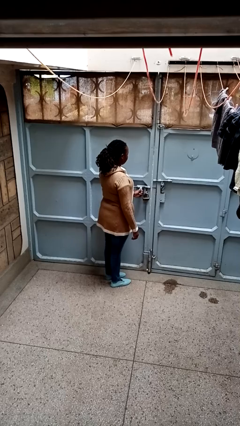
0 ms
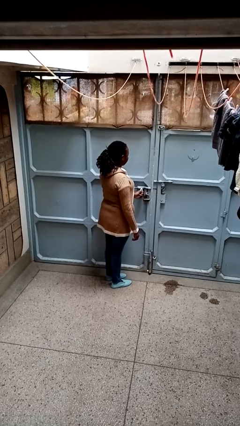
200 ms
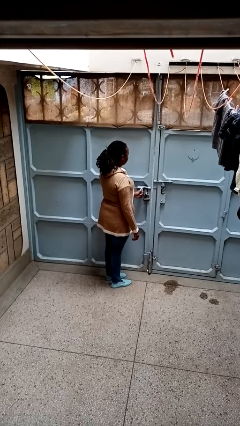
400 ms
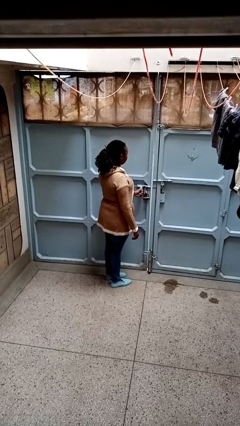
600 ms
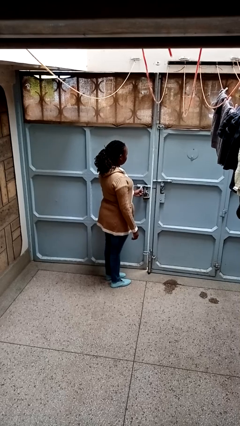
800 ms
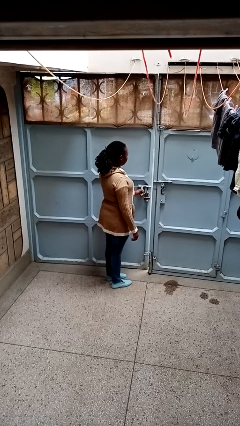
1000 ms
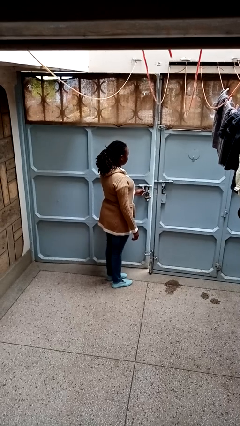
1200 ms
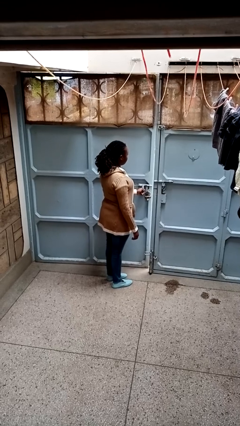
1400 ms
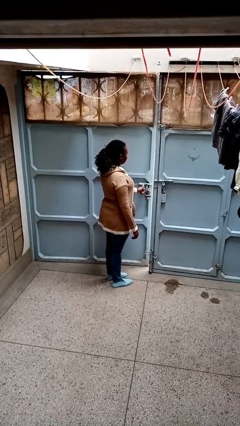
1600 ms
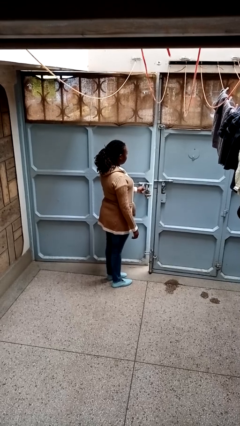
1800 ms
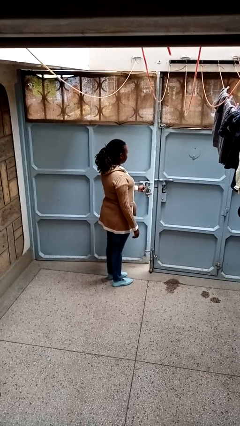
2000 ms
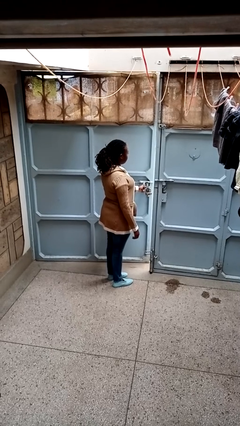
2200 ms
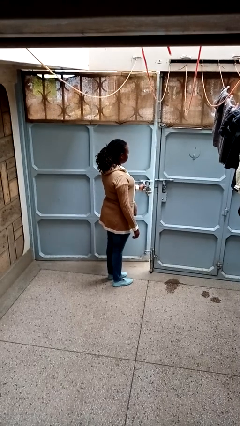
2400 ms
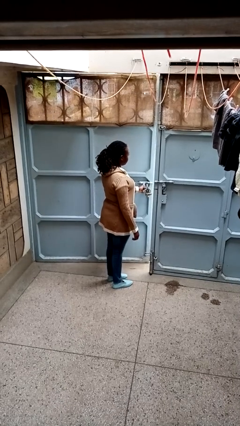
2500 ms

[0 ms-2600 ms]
person opens gate

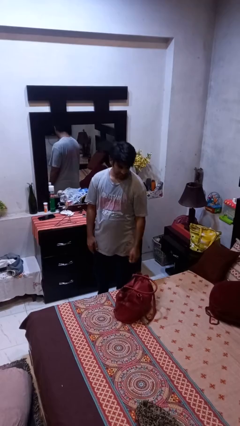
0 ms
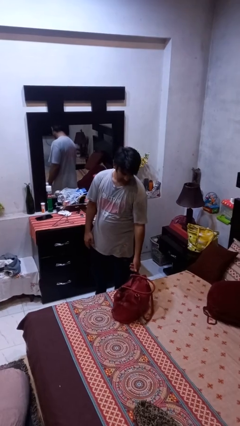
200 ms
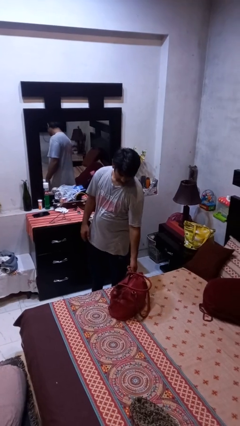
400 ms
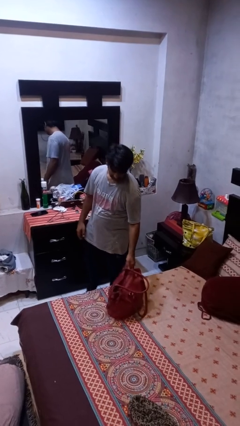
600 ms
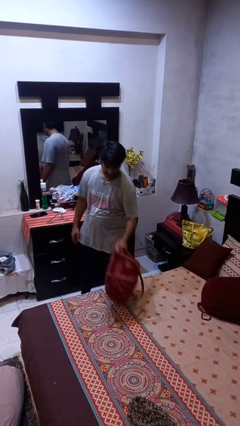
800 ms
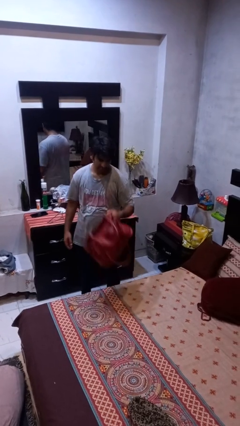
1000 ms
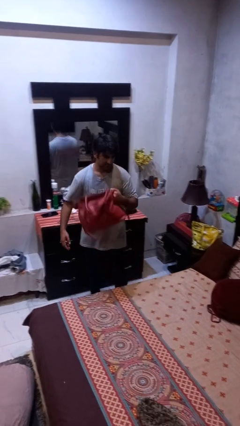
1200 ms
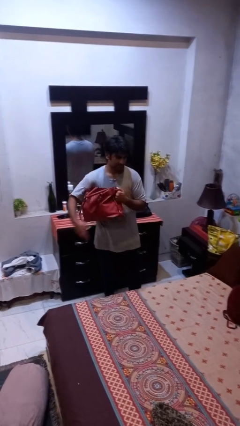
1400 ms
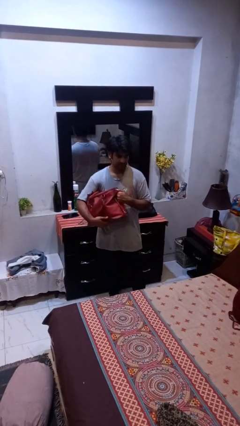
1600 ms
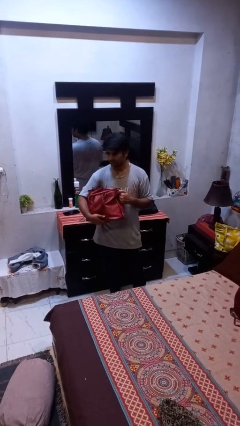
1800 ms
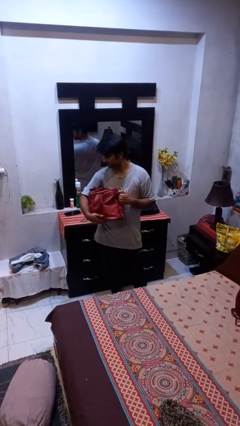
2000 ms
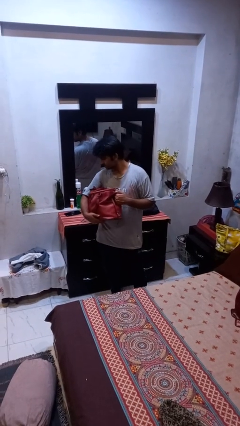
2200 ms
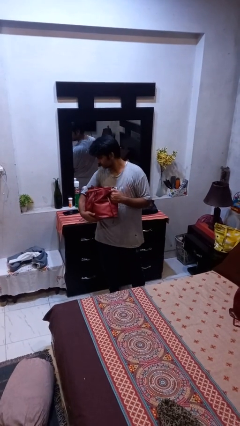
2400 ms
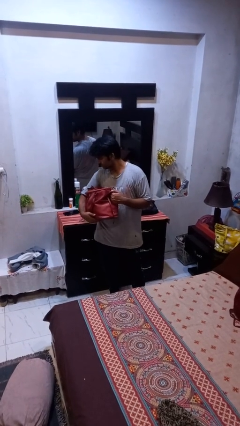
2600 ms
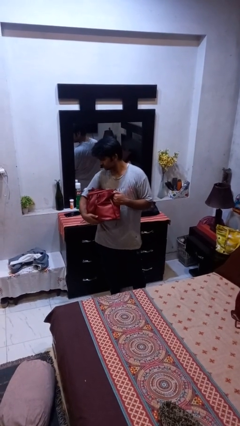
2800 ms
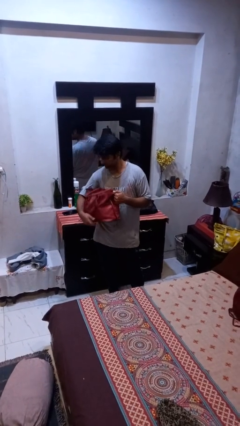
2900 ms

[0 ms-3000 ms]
person picks up object from bed

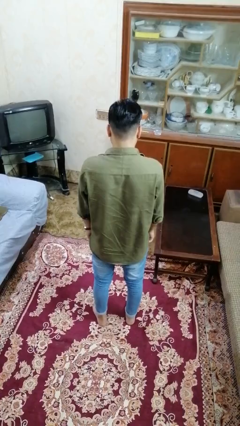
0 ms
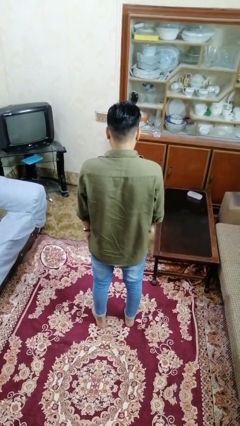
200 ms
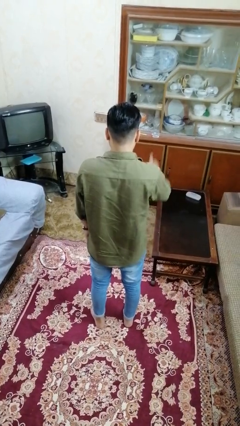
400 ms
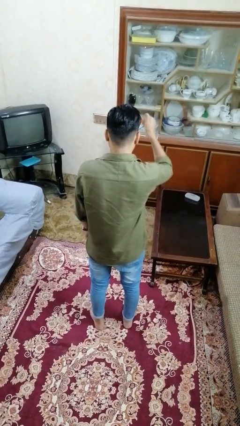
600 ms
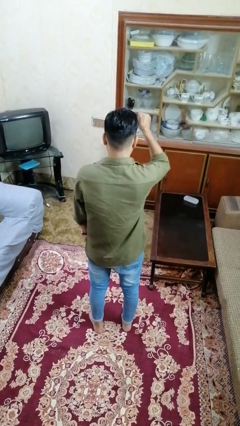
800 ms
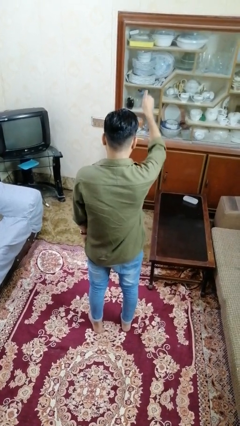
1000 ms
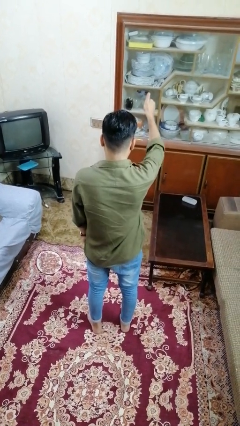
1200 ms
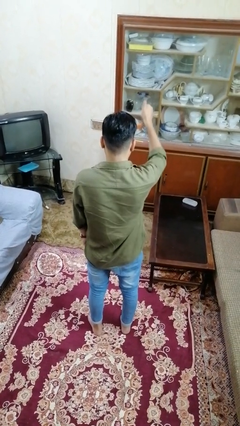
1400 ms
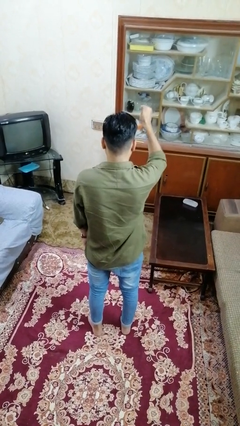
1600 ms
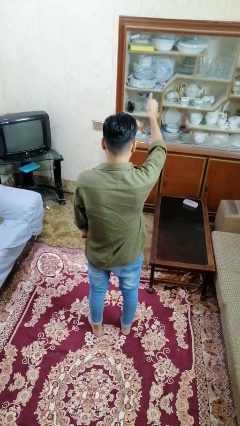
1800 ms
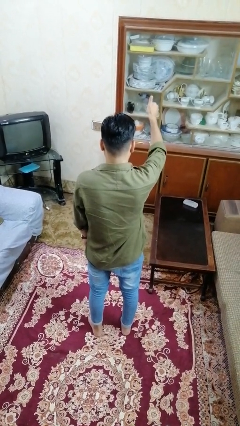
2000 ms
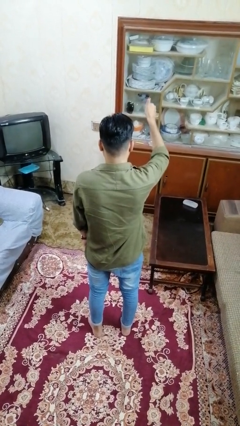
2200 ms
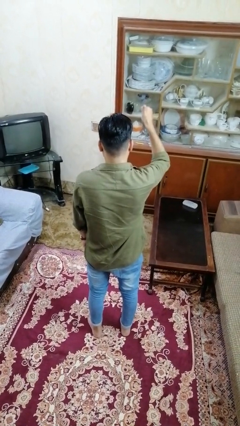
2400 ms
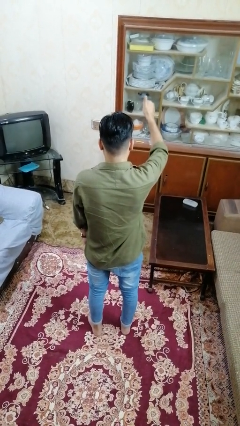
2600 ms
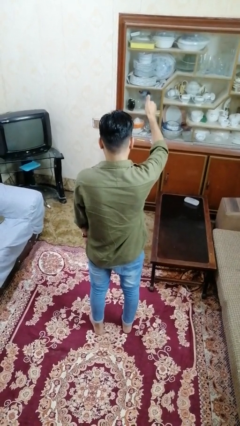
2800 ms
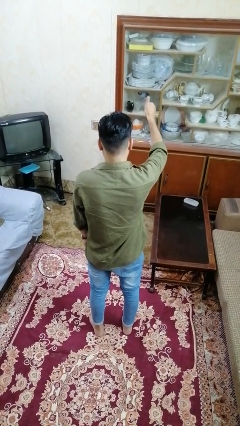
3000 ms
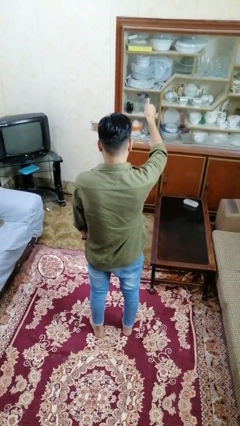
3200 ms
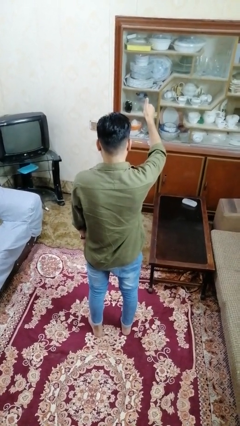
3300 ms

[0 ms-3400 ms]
person gestures thumbs up

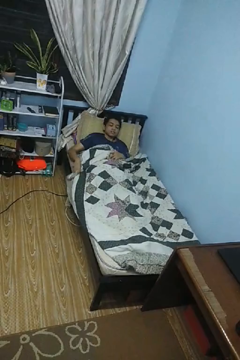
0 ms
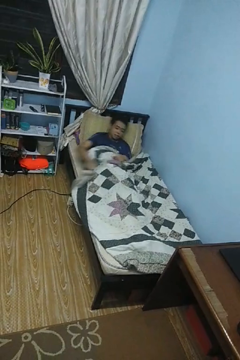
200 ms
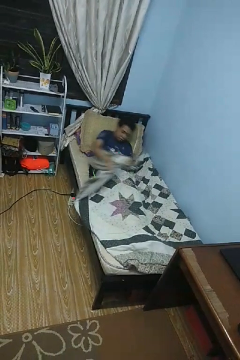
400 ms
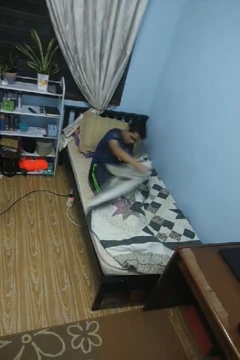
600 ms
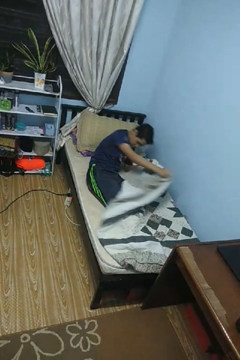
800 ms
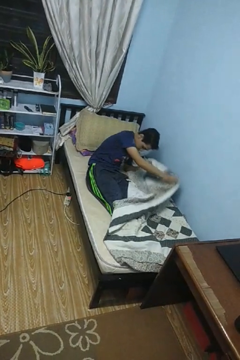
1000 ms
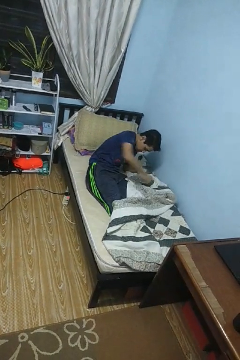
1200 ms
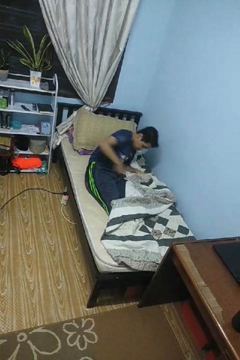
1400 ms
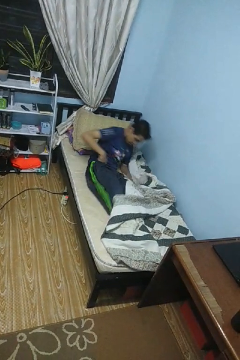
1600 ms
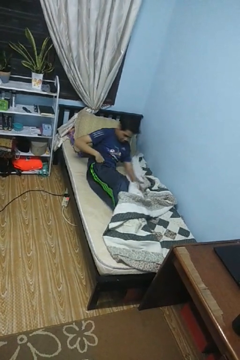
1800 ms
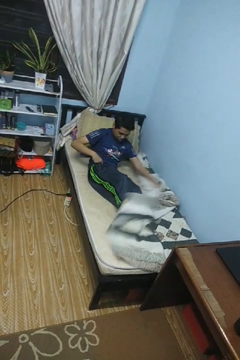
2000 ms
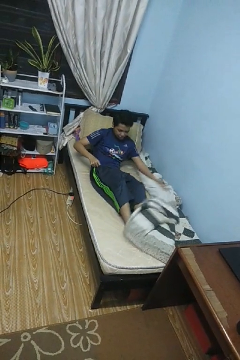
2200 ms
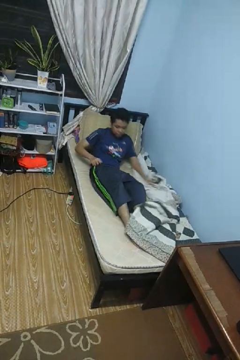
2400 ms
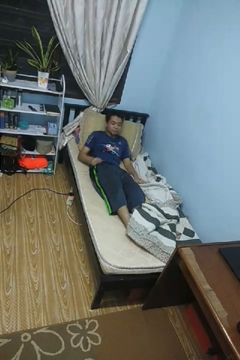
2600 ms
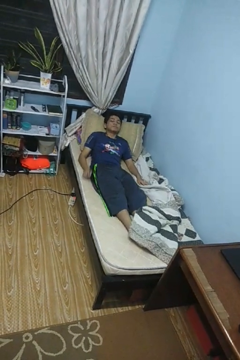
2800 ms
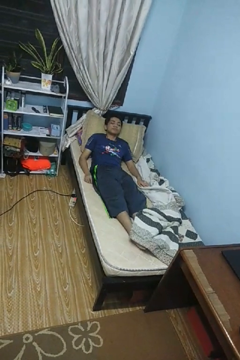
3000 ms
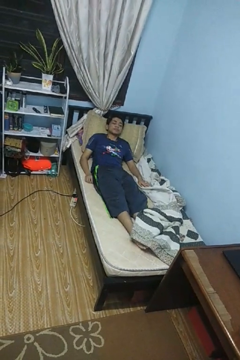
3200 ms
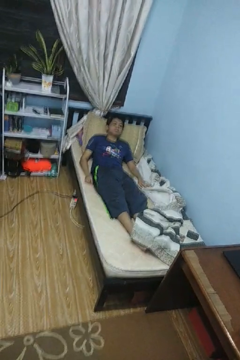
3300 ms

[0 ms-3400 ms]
person uncovers with bedsheets

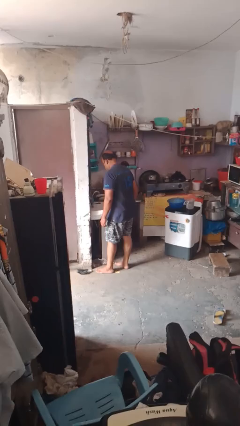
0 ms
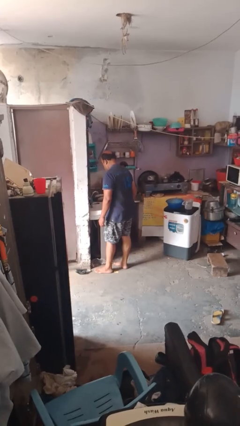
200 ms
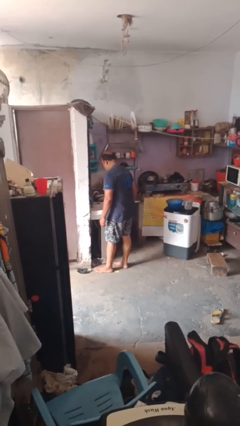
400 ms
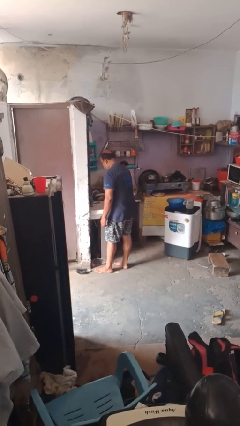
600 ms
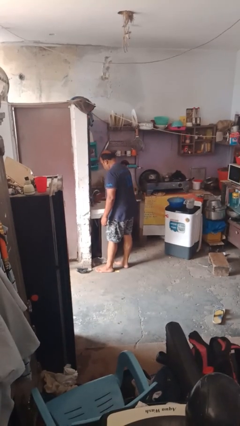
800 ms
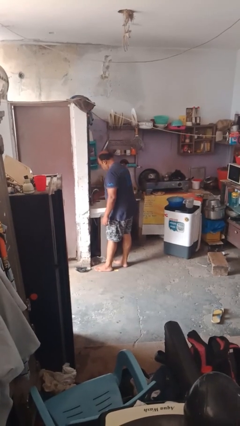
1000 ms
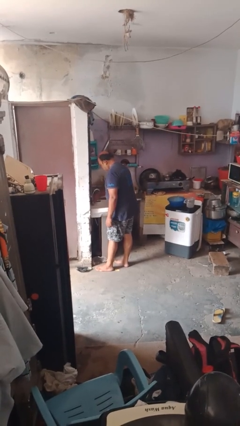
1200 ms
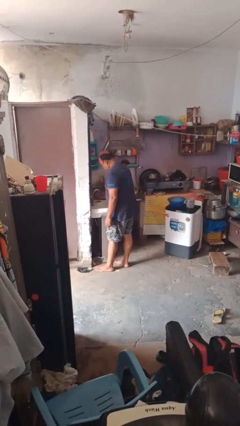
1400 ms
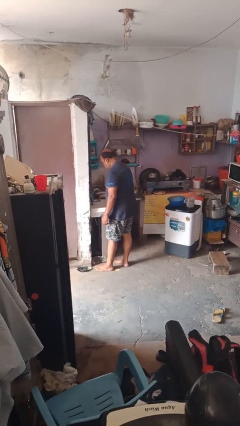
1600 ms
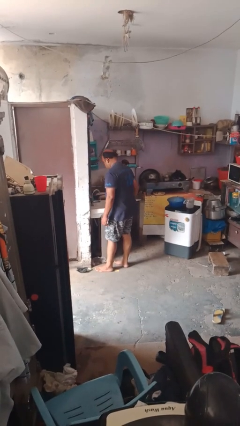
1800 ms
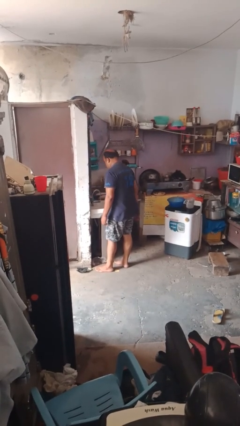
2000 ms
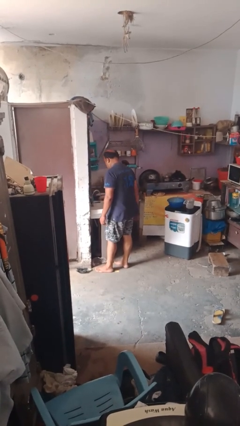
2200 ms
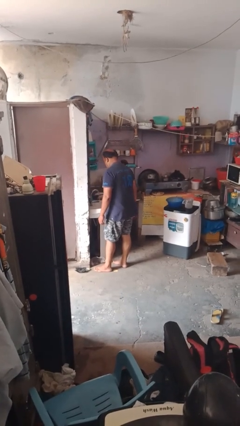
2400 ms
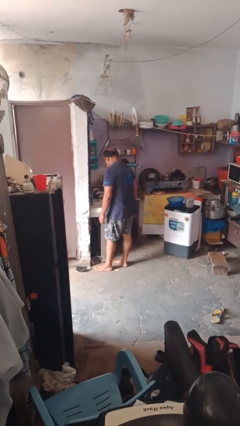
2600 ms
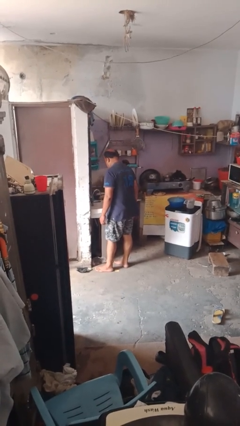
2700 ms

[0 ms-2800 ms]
person turns on faucet

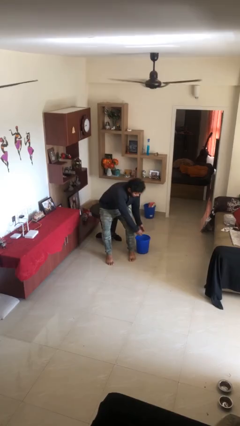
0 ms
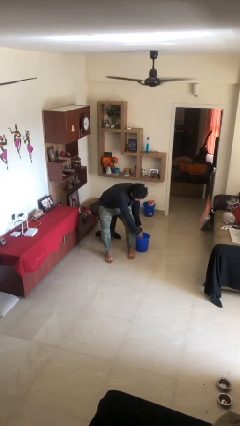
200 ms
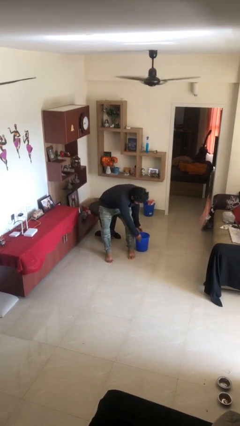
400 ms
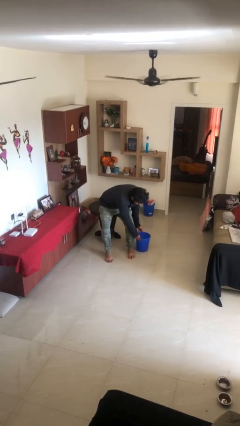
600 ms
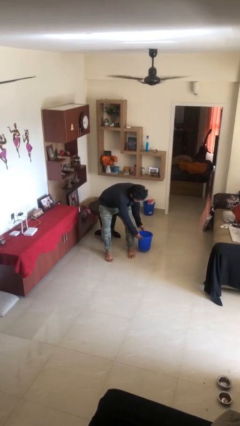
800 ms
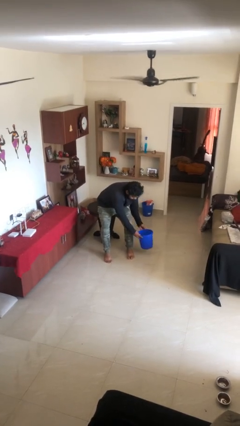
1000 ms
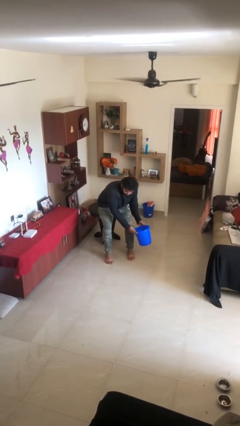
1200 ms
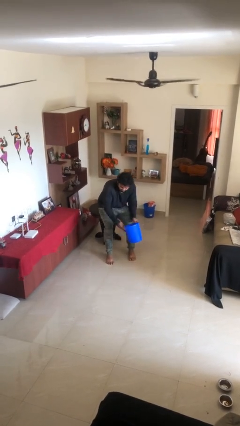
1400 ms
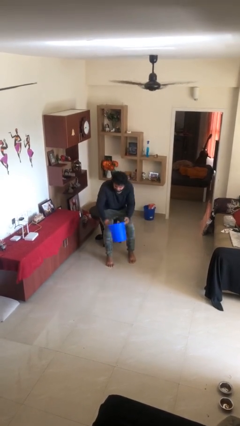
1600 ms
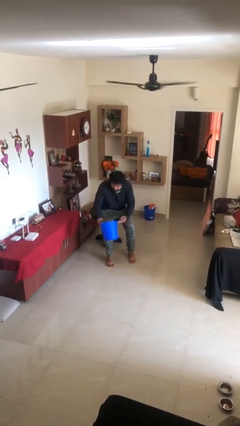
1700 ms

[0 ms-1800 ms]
person picks up object from floor

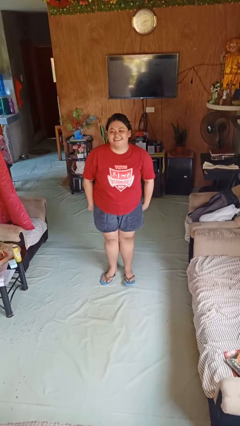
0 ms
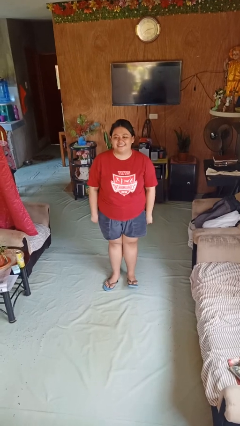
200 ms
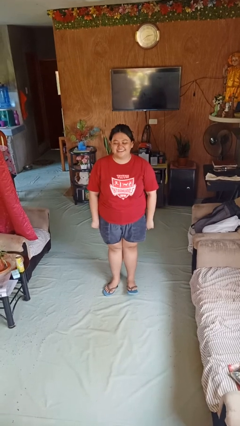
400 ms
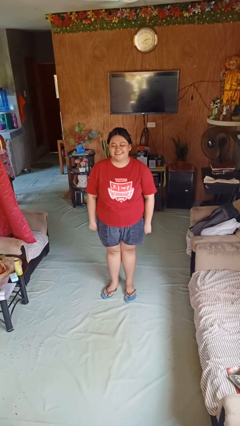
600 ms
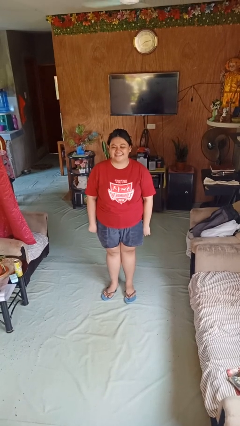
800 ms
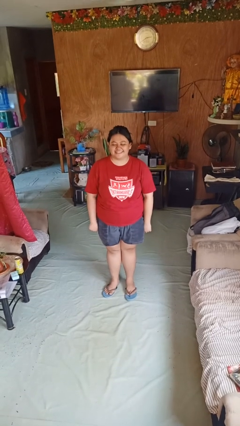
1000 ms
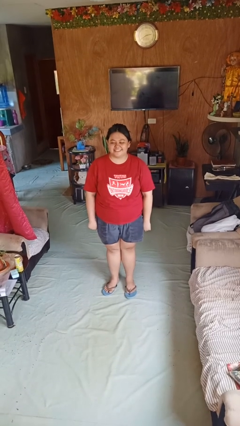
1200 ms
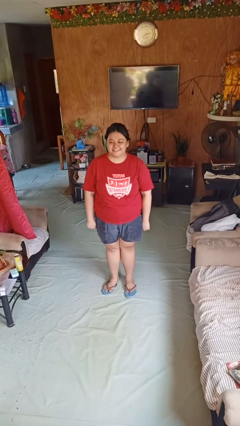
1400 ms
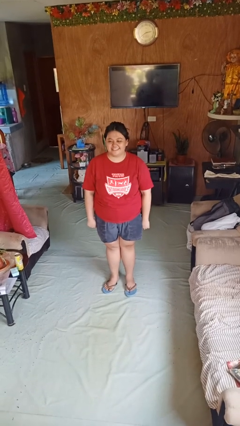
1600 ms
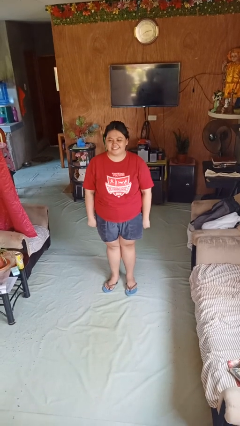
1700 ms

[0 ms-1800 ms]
person stands up
